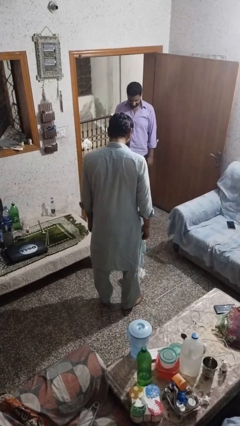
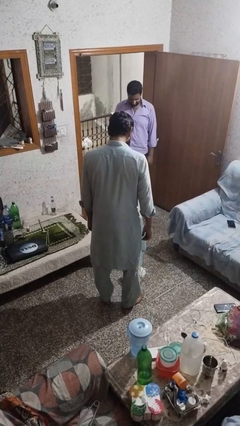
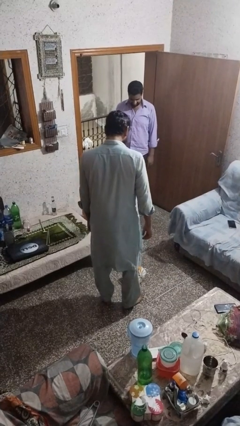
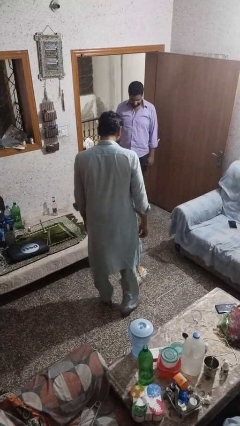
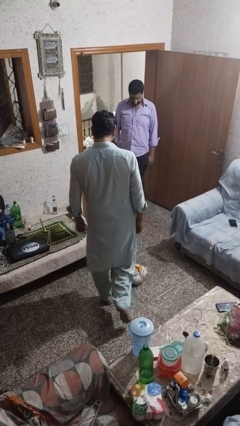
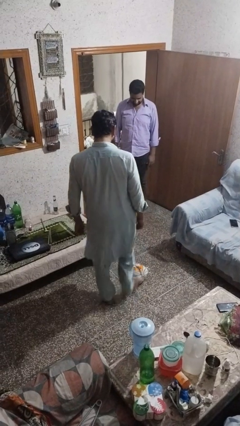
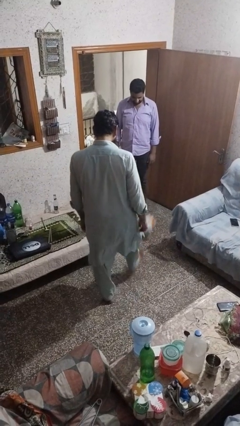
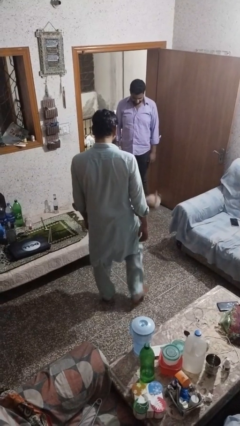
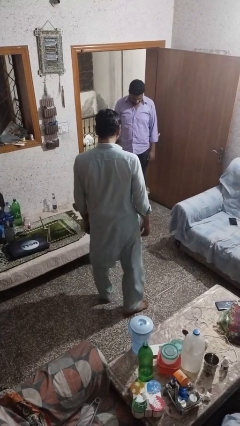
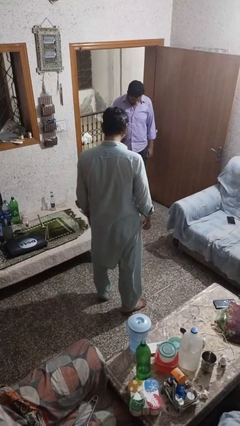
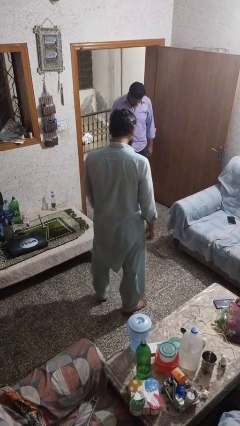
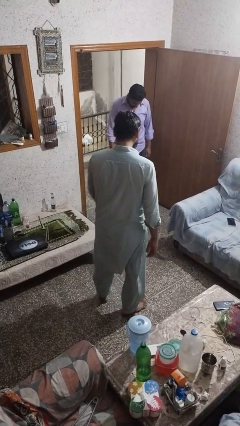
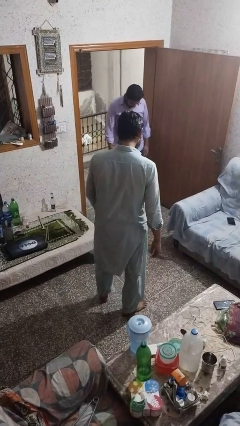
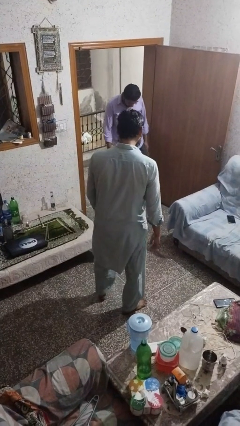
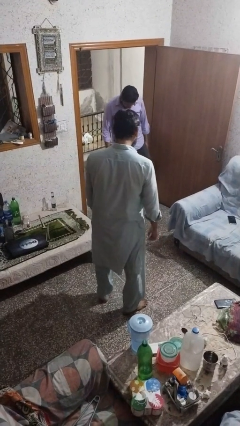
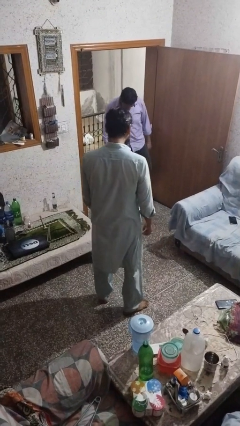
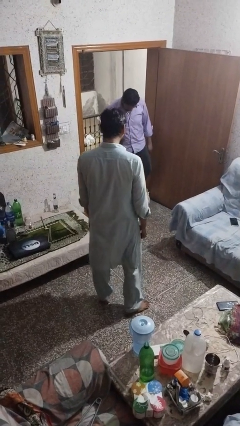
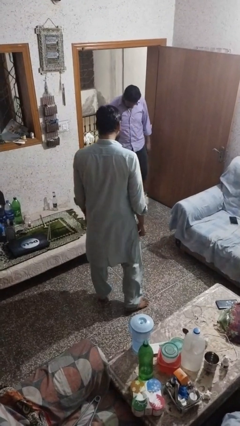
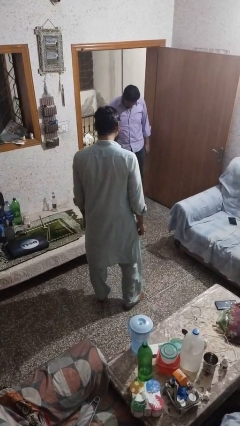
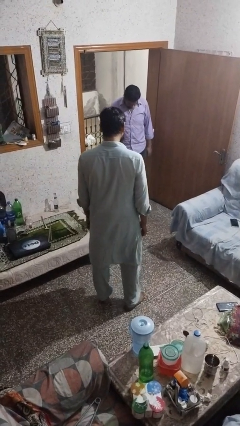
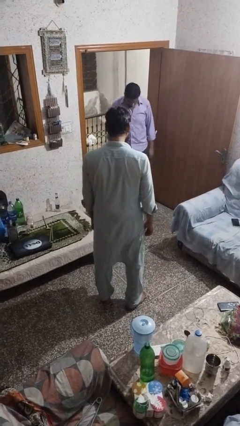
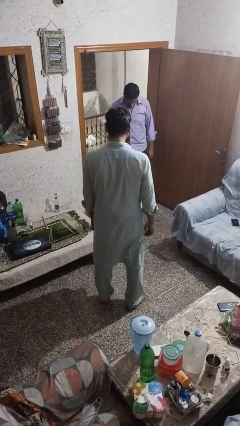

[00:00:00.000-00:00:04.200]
person kicks object to person

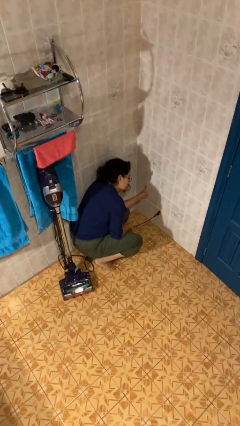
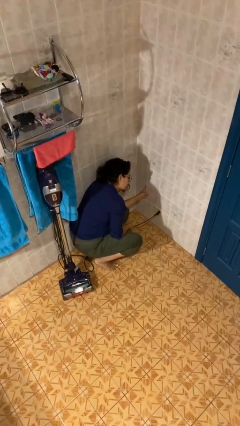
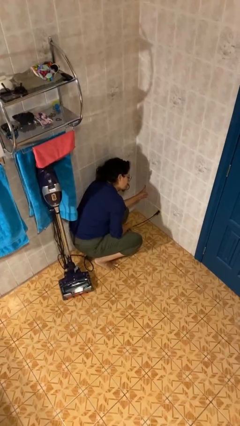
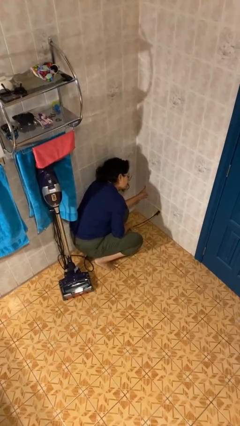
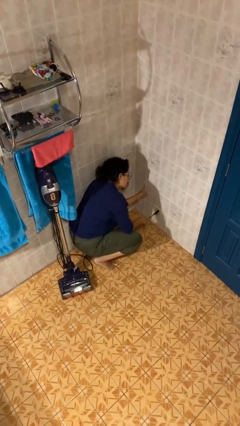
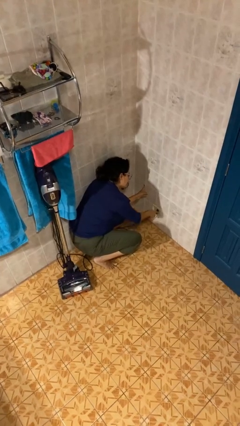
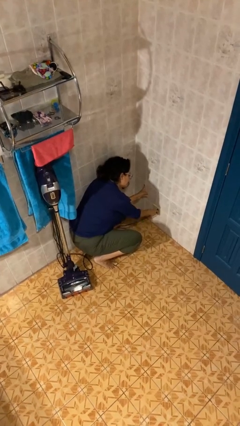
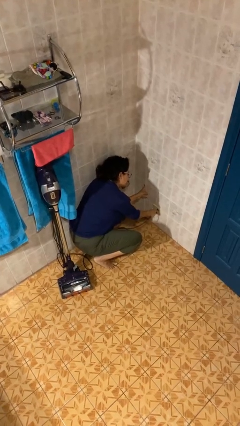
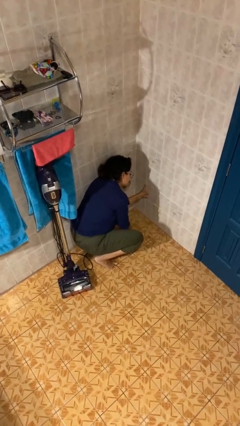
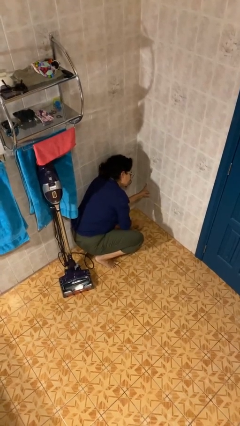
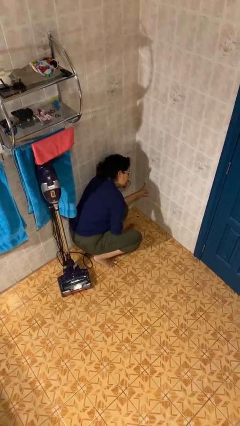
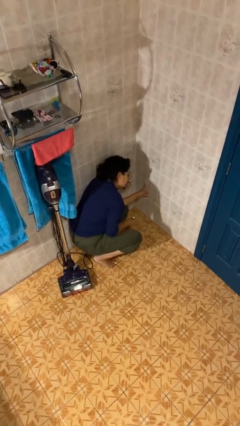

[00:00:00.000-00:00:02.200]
person unplugs from electrical socket

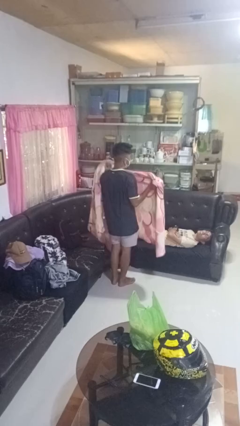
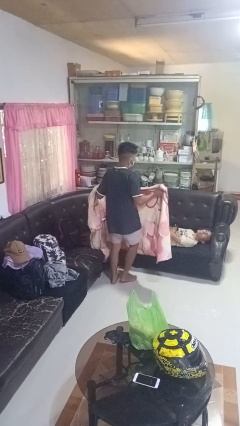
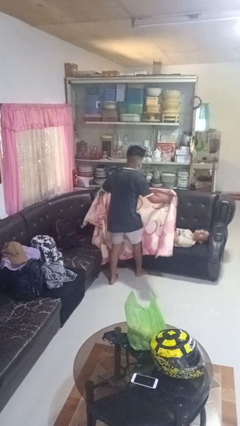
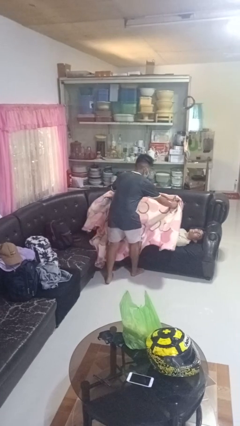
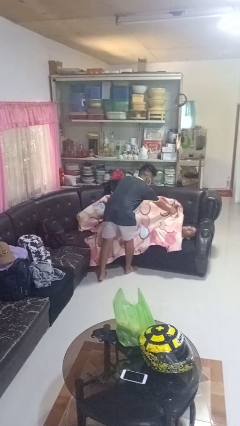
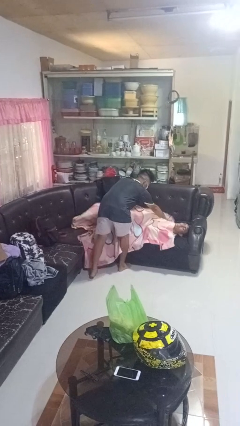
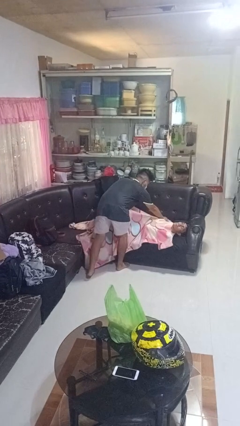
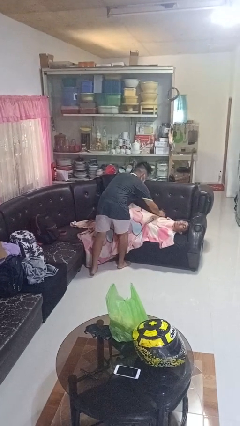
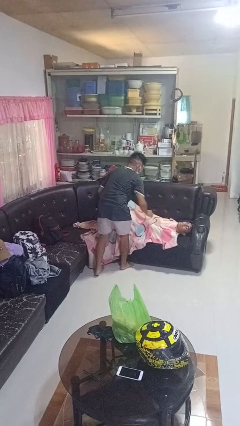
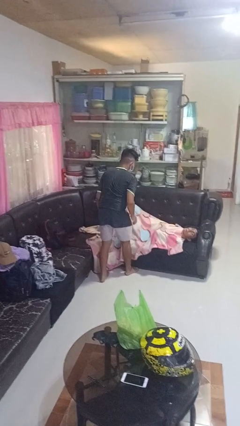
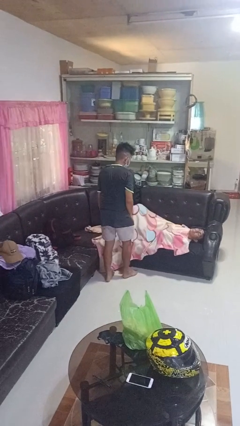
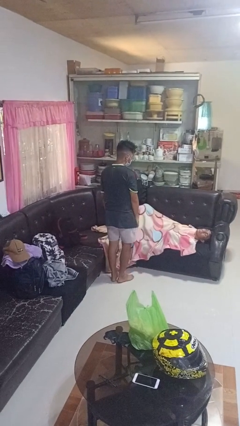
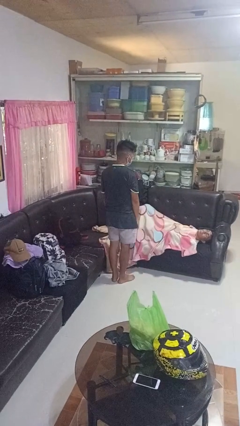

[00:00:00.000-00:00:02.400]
person covers friend with blanket

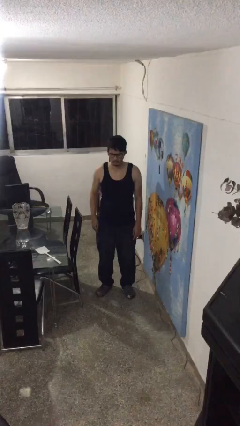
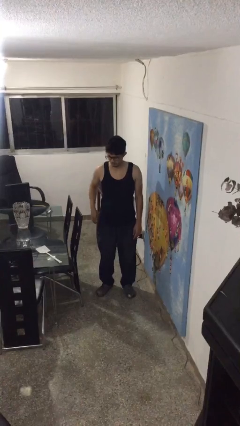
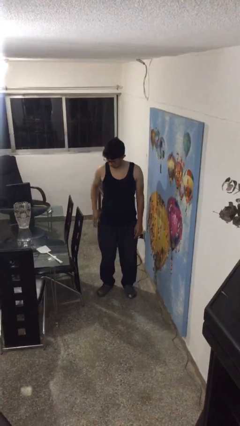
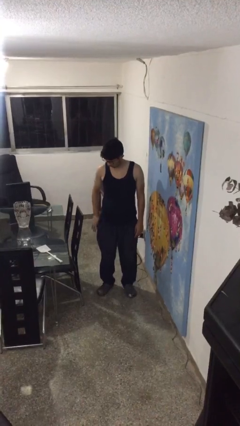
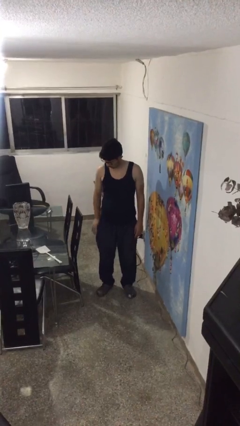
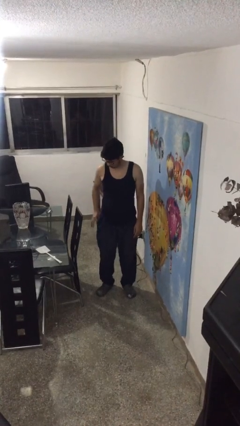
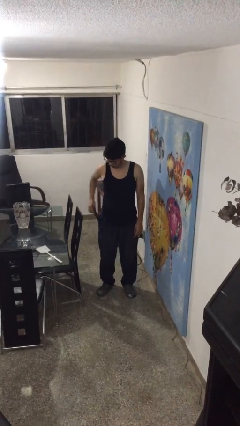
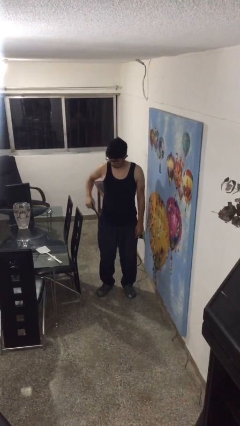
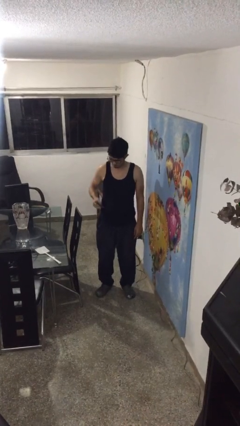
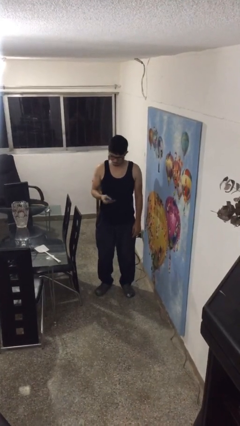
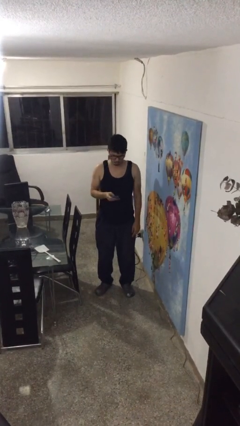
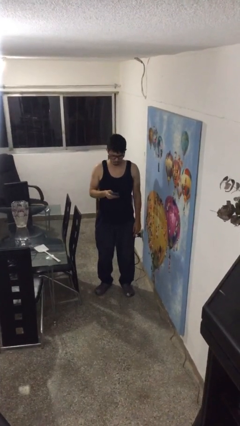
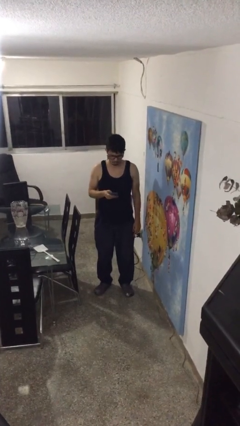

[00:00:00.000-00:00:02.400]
person takes phone from pocket

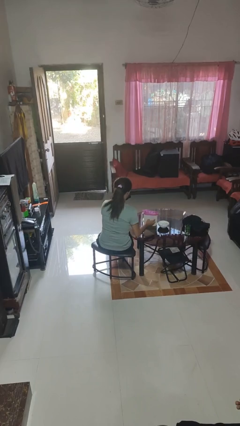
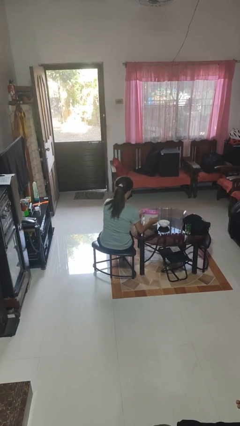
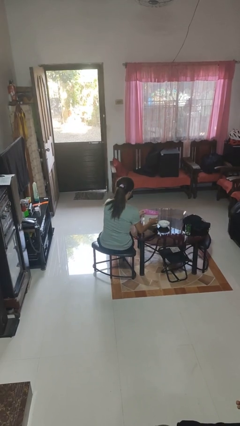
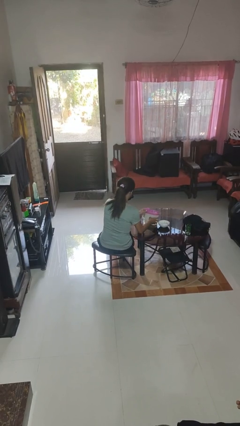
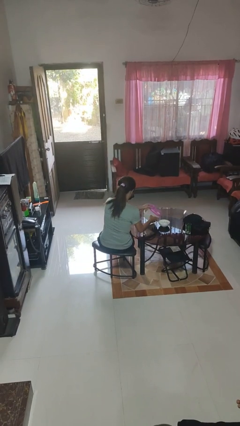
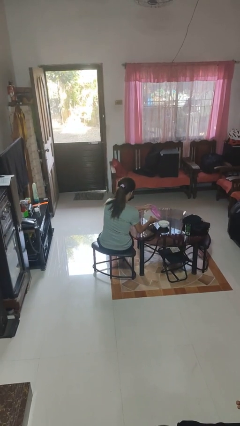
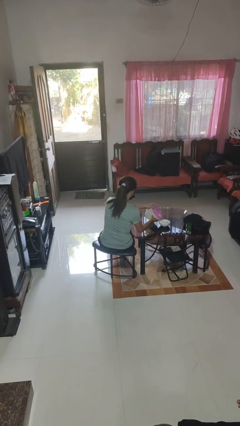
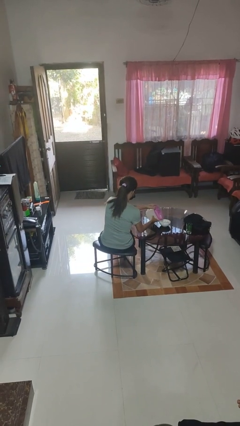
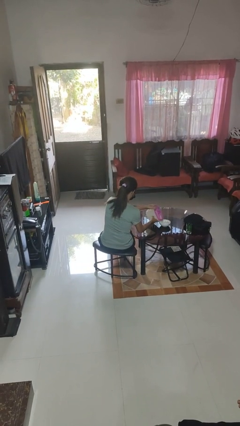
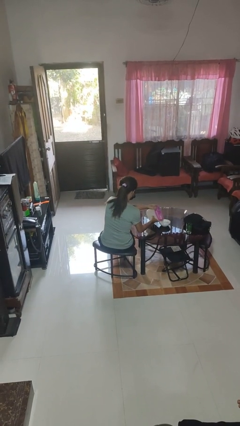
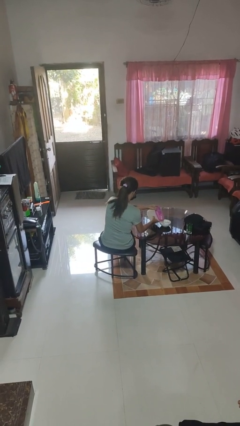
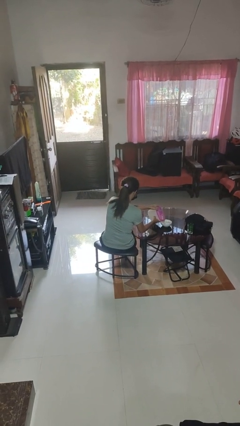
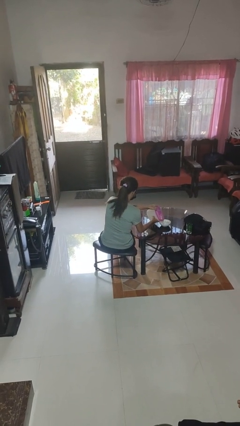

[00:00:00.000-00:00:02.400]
person pours into bowl

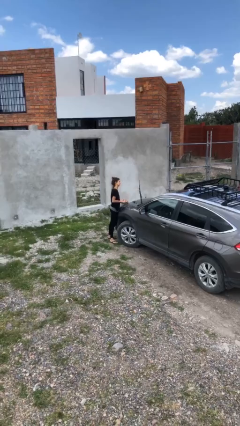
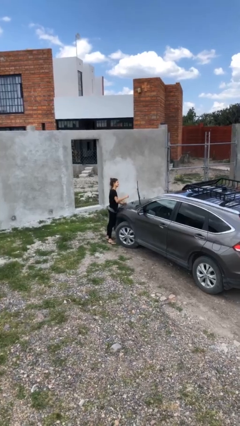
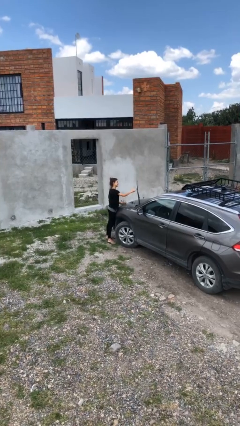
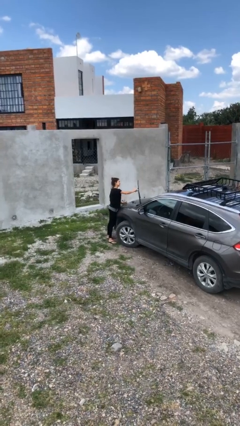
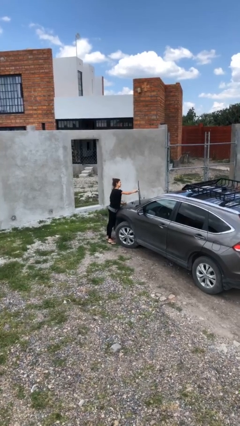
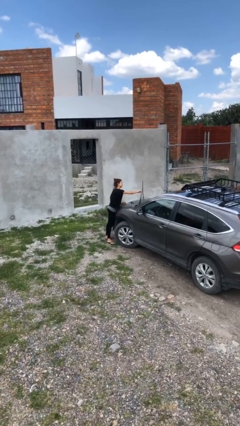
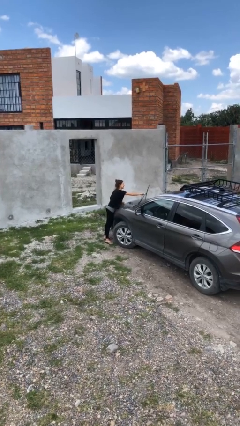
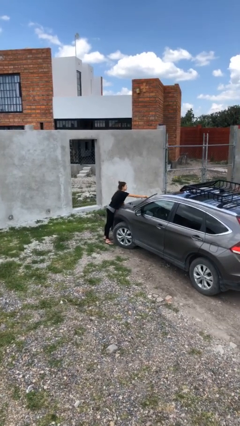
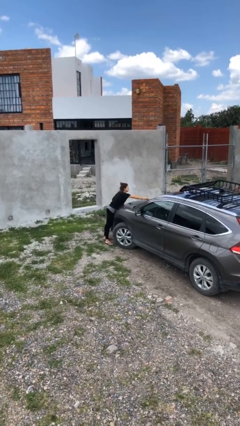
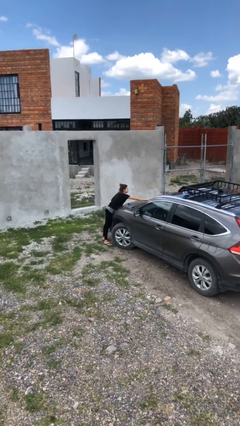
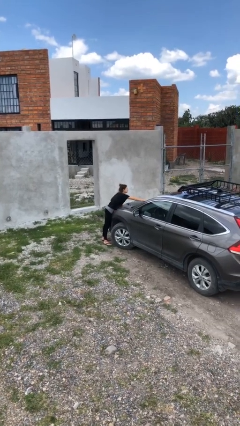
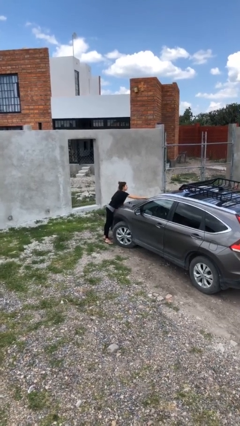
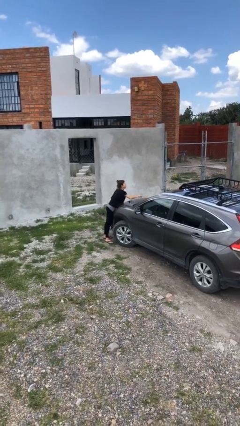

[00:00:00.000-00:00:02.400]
person flips down car wipers

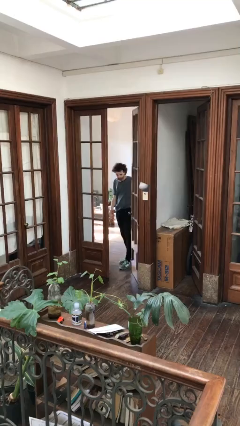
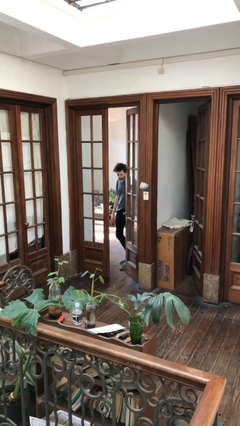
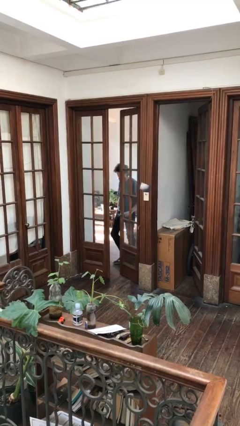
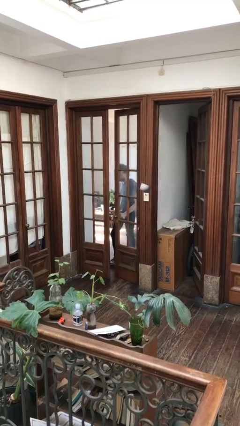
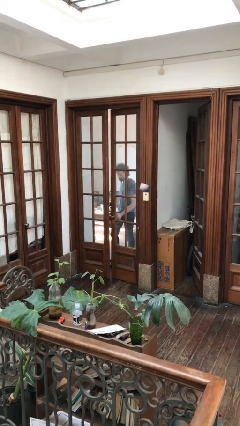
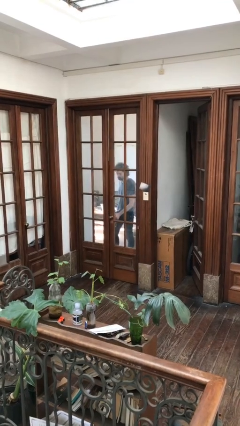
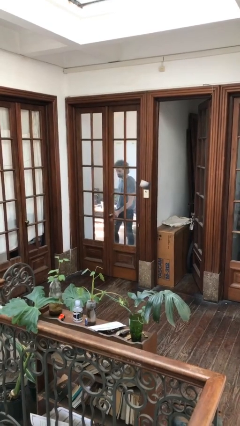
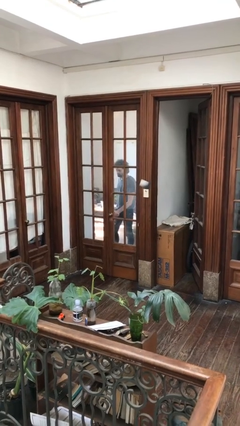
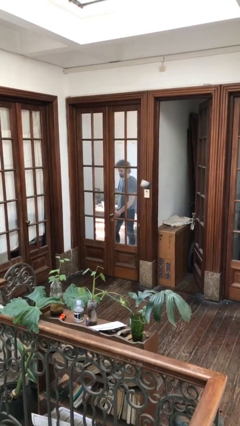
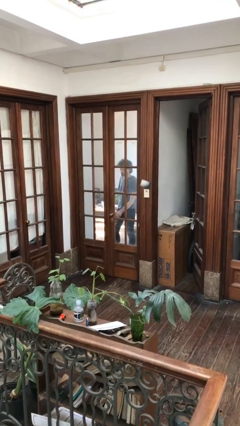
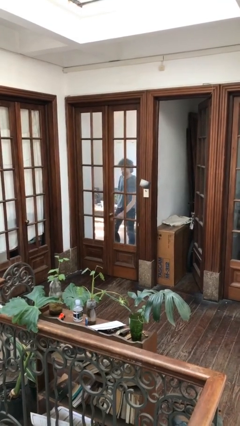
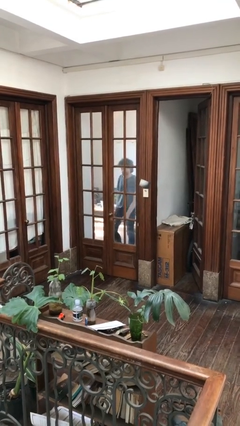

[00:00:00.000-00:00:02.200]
person closes facility door
